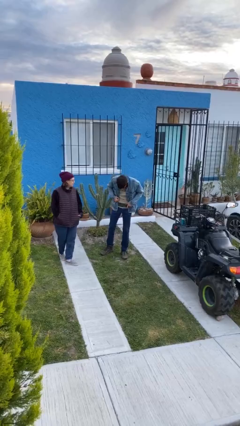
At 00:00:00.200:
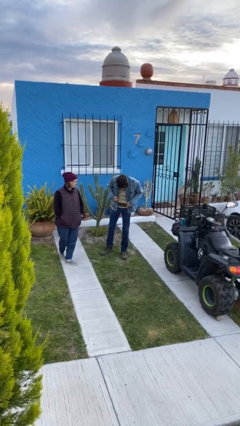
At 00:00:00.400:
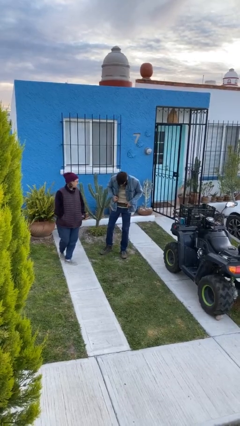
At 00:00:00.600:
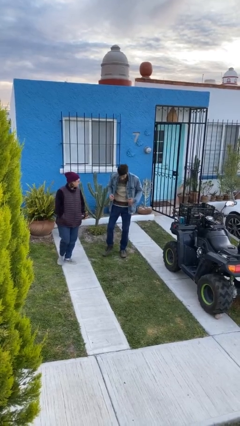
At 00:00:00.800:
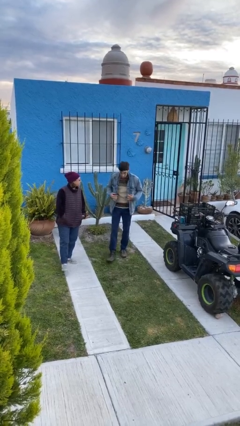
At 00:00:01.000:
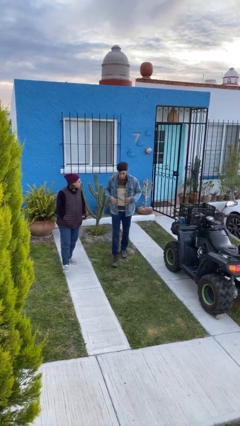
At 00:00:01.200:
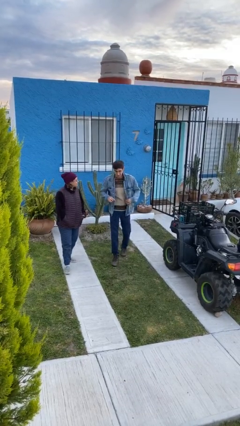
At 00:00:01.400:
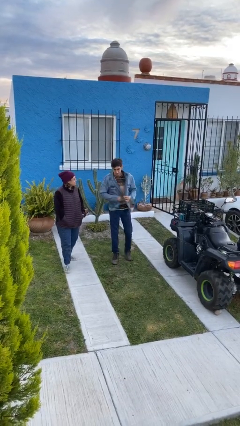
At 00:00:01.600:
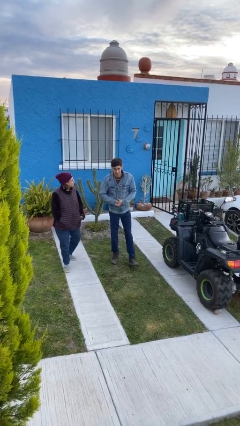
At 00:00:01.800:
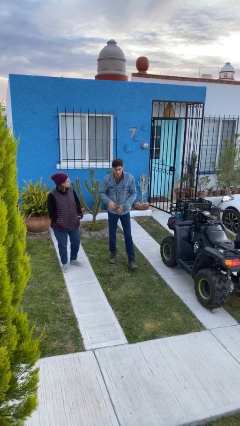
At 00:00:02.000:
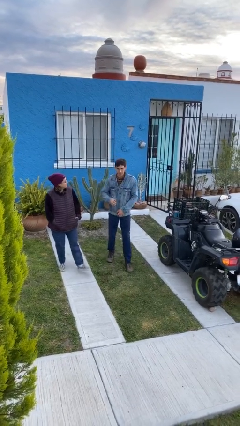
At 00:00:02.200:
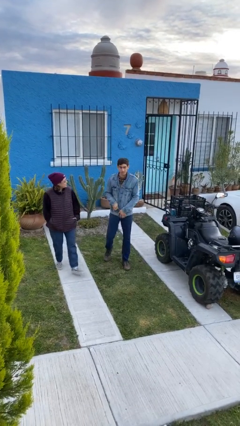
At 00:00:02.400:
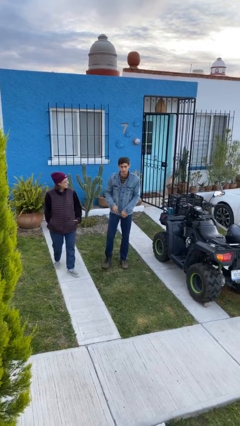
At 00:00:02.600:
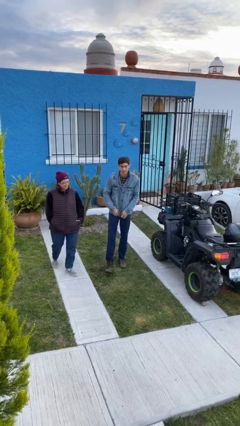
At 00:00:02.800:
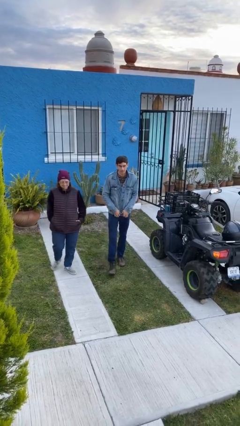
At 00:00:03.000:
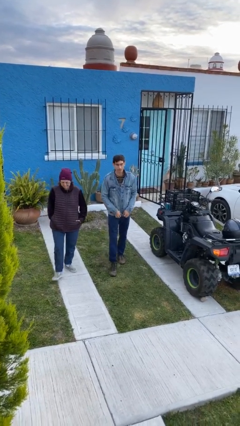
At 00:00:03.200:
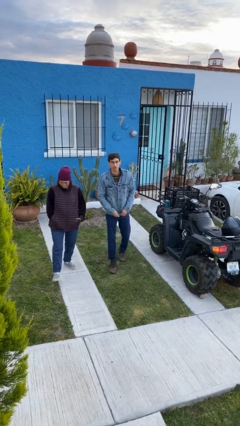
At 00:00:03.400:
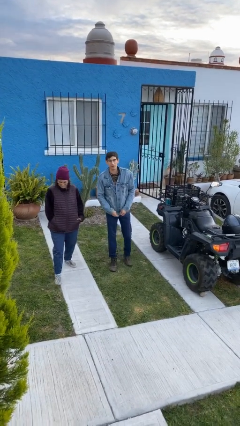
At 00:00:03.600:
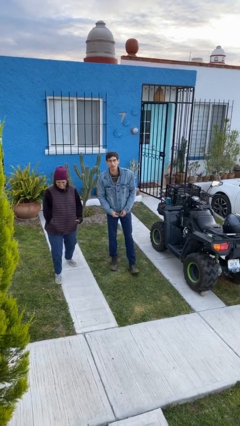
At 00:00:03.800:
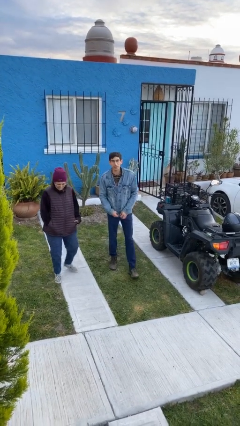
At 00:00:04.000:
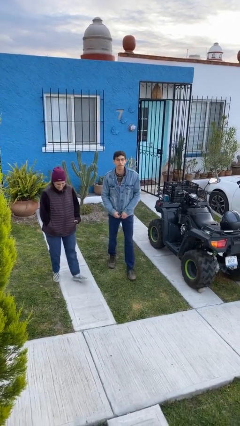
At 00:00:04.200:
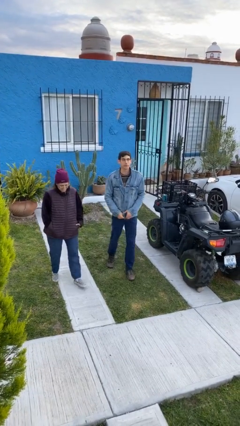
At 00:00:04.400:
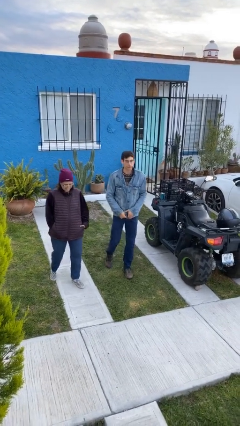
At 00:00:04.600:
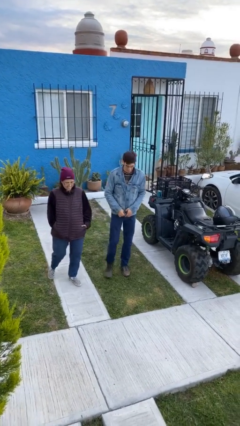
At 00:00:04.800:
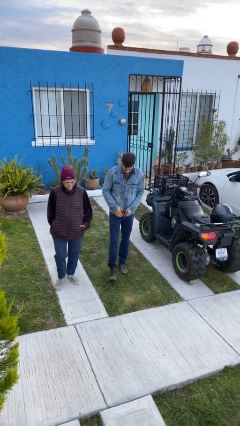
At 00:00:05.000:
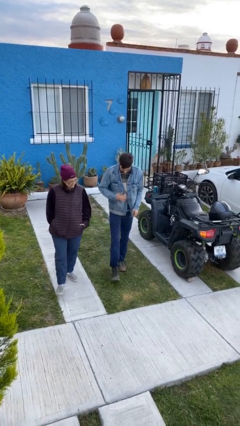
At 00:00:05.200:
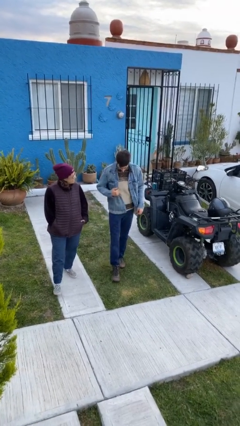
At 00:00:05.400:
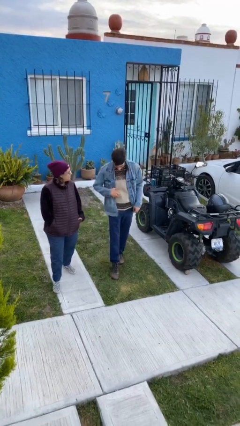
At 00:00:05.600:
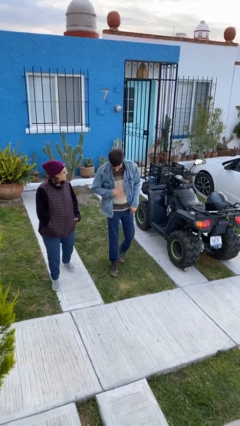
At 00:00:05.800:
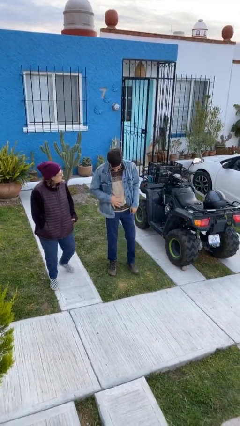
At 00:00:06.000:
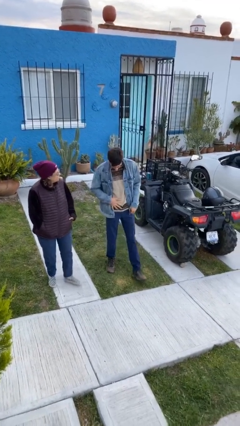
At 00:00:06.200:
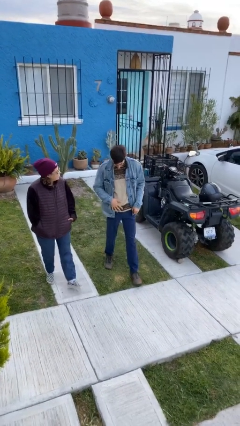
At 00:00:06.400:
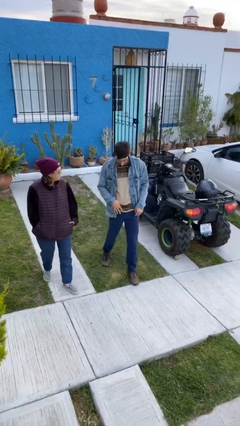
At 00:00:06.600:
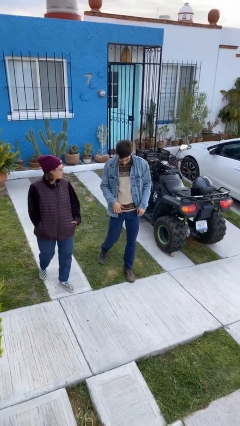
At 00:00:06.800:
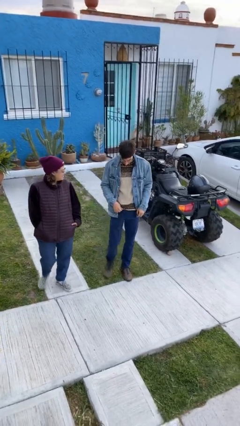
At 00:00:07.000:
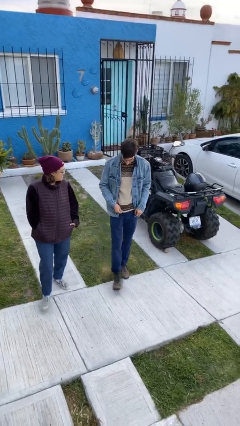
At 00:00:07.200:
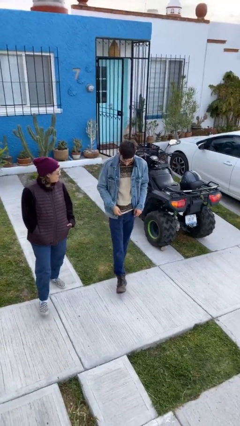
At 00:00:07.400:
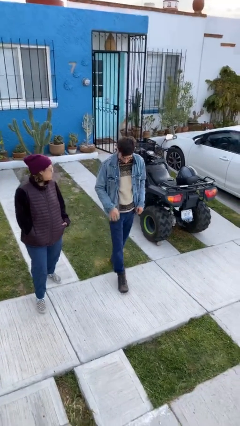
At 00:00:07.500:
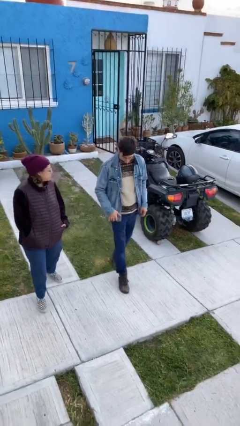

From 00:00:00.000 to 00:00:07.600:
person talks to person

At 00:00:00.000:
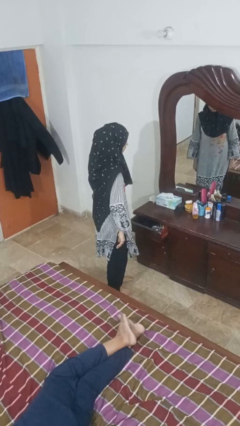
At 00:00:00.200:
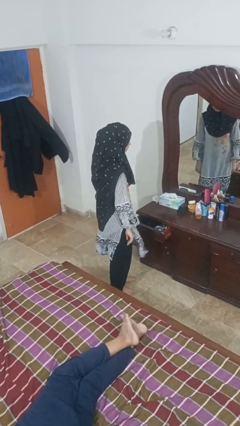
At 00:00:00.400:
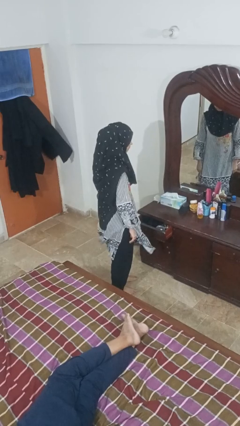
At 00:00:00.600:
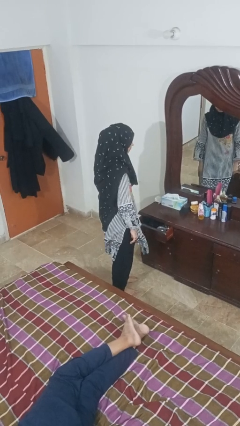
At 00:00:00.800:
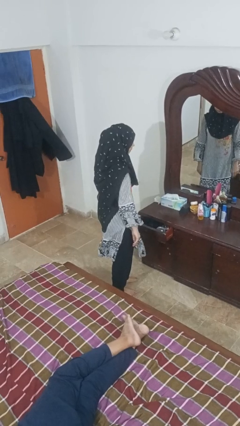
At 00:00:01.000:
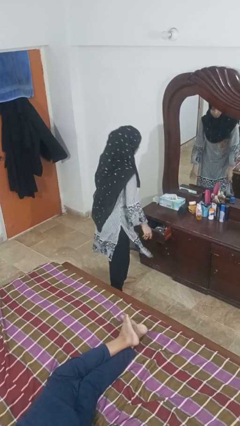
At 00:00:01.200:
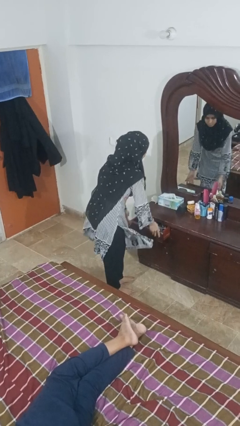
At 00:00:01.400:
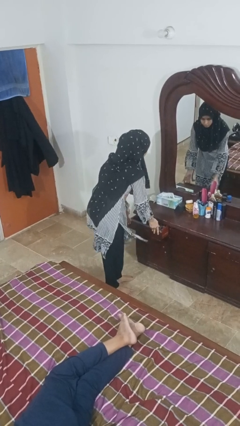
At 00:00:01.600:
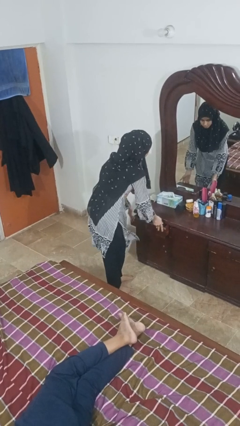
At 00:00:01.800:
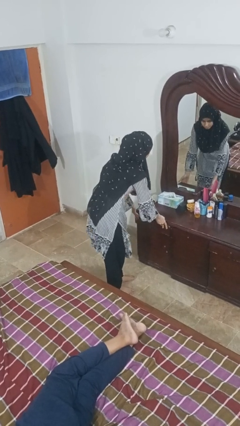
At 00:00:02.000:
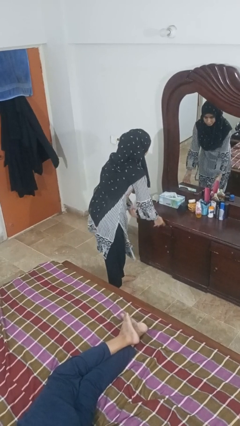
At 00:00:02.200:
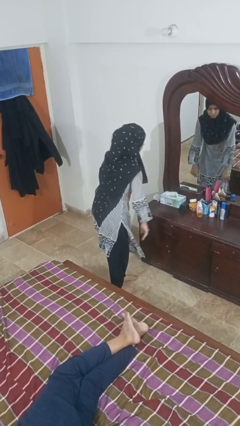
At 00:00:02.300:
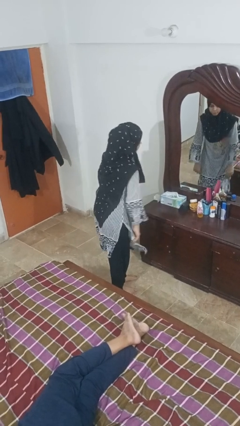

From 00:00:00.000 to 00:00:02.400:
person closes dresser drawer

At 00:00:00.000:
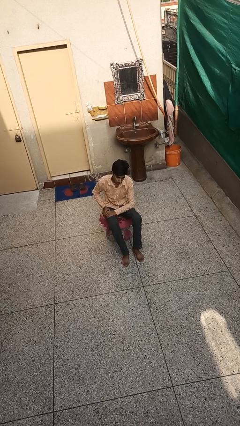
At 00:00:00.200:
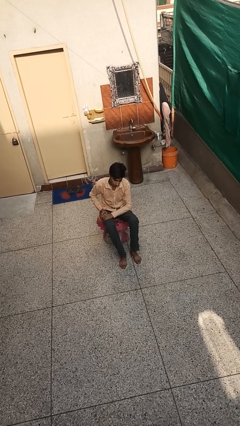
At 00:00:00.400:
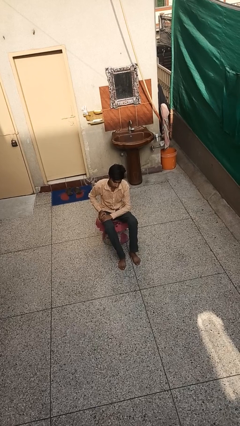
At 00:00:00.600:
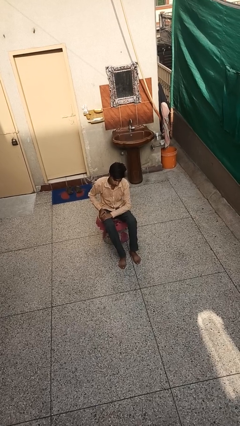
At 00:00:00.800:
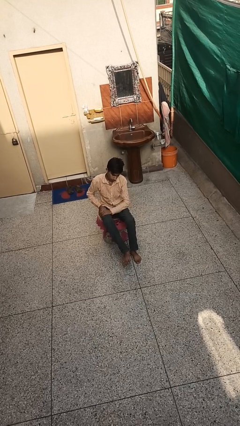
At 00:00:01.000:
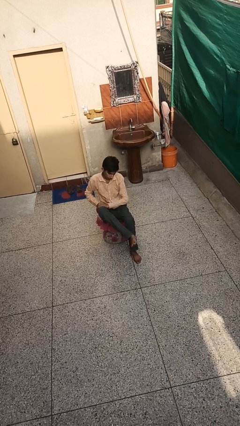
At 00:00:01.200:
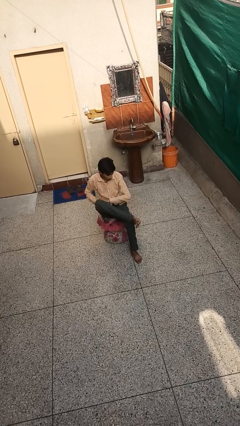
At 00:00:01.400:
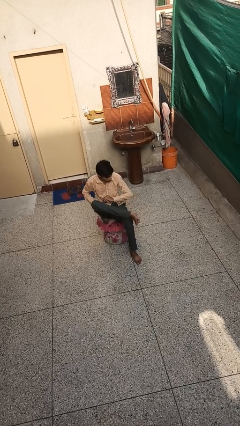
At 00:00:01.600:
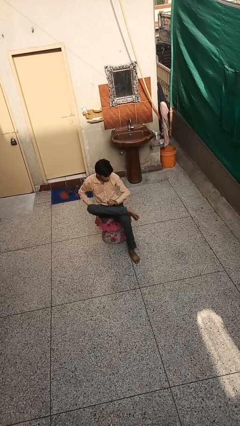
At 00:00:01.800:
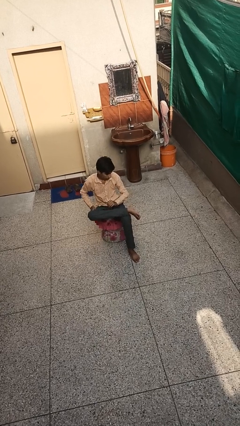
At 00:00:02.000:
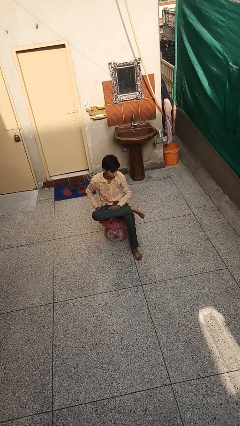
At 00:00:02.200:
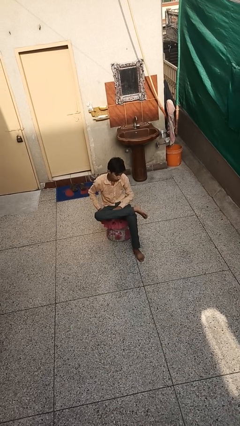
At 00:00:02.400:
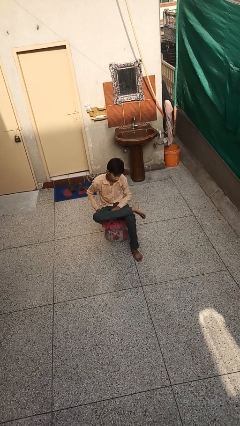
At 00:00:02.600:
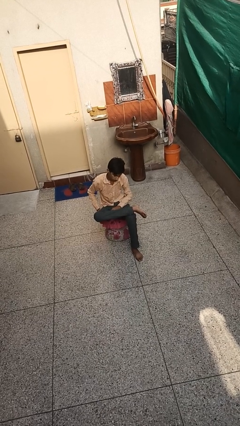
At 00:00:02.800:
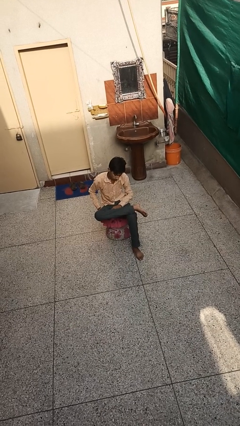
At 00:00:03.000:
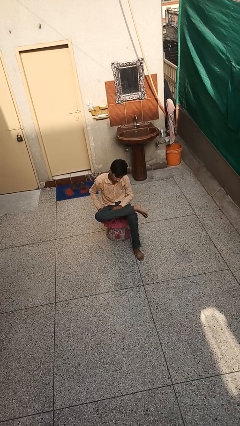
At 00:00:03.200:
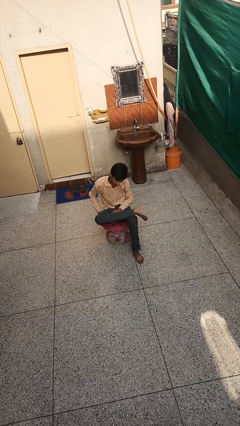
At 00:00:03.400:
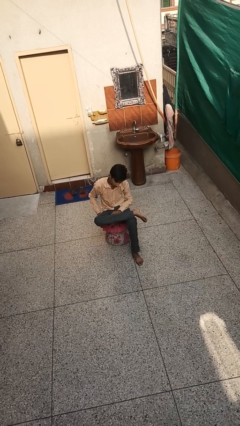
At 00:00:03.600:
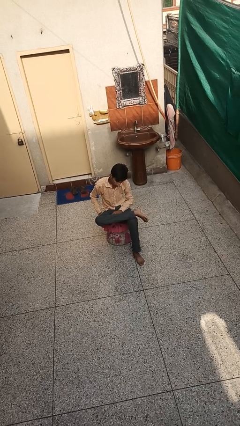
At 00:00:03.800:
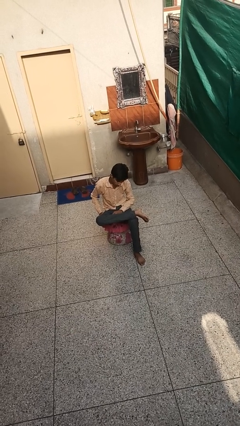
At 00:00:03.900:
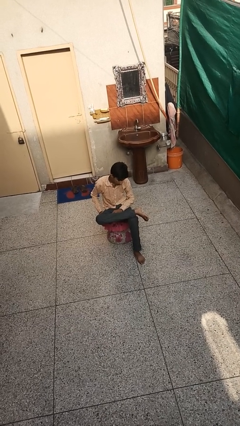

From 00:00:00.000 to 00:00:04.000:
person crosses legs

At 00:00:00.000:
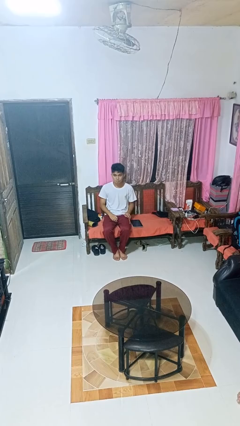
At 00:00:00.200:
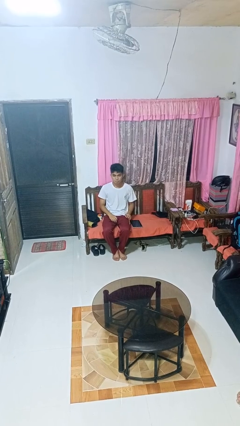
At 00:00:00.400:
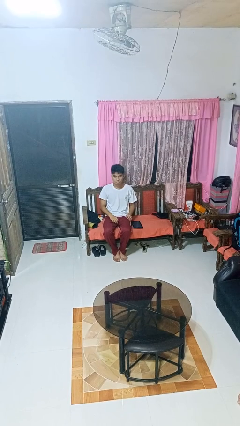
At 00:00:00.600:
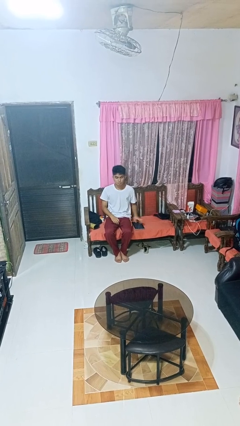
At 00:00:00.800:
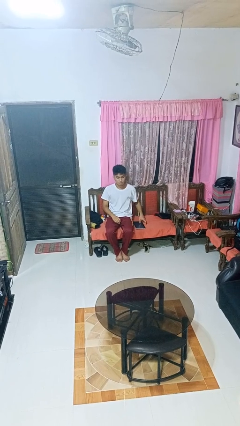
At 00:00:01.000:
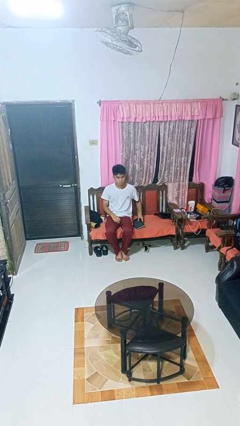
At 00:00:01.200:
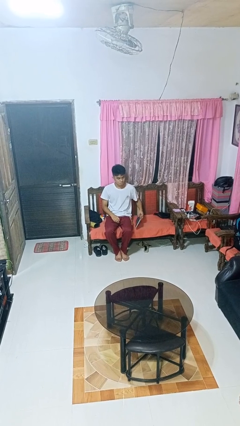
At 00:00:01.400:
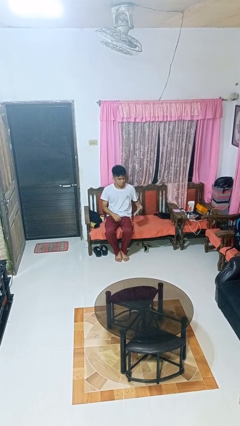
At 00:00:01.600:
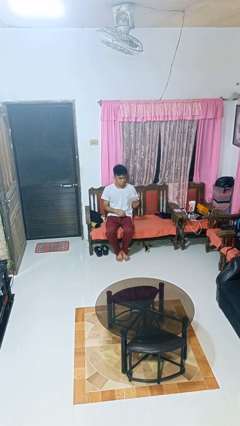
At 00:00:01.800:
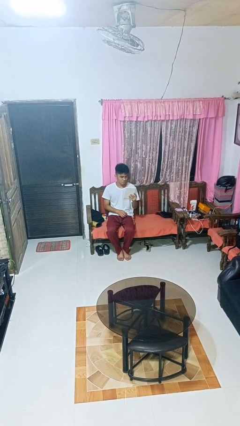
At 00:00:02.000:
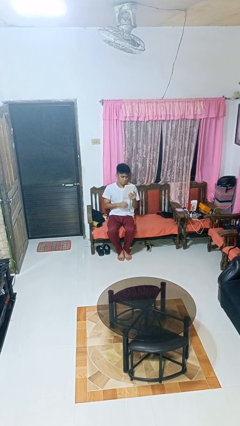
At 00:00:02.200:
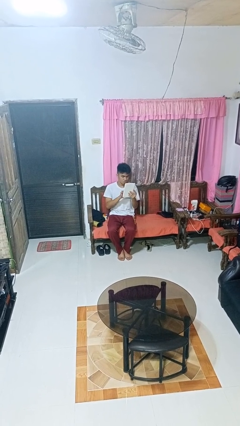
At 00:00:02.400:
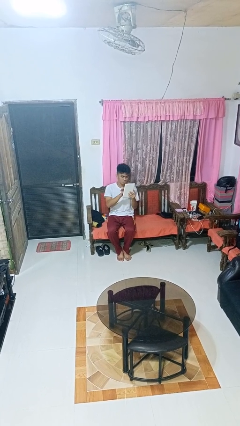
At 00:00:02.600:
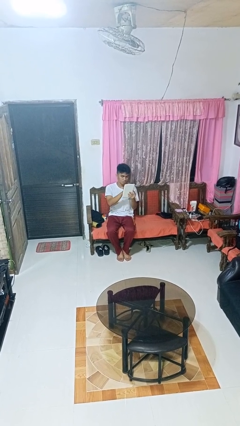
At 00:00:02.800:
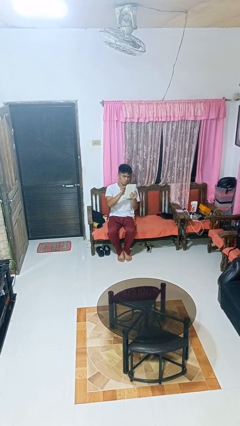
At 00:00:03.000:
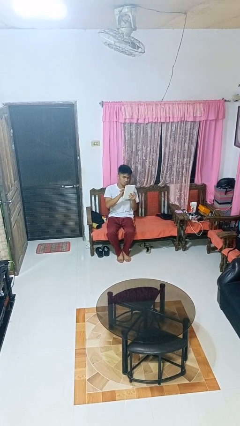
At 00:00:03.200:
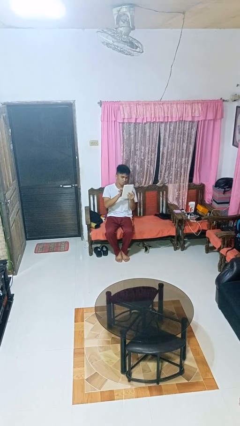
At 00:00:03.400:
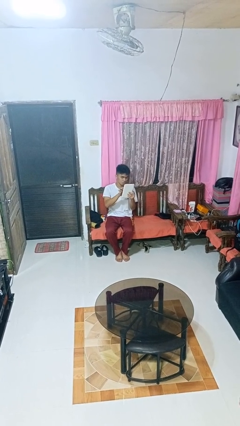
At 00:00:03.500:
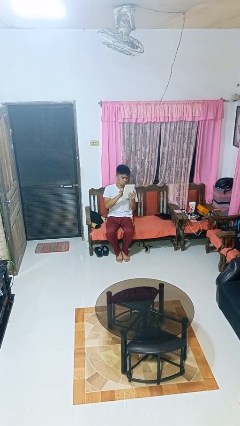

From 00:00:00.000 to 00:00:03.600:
person interacts with tablet
